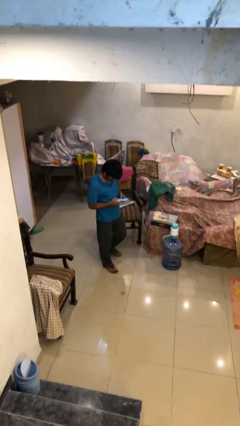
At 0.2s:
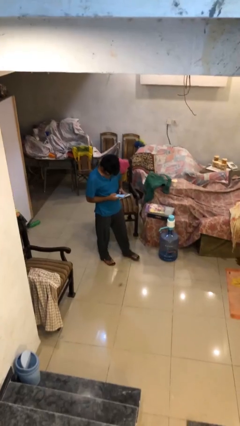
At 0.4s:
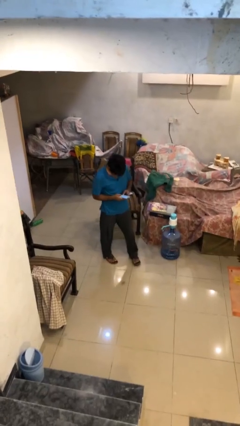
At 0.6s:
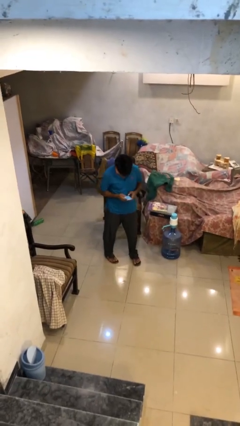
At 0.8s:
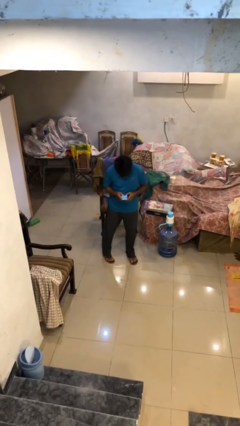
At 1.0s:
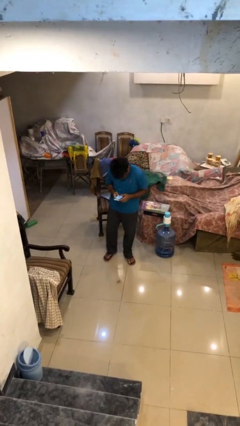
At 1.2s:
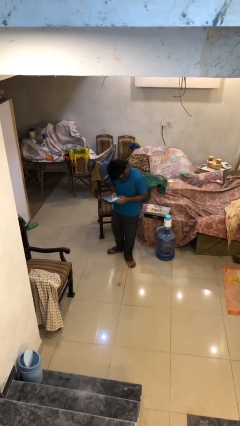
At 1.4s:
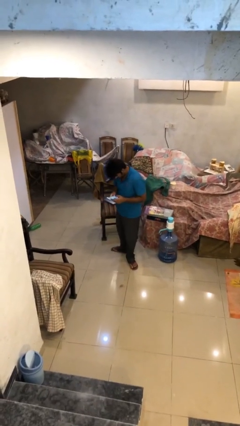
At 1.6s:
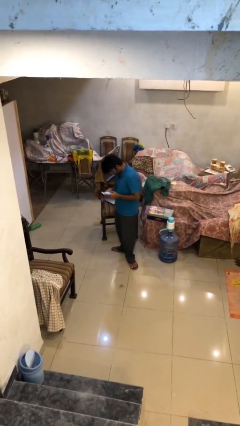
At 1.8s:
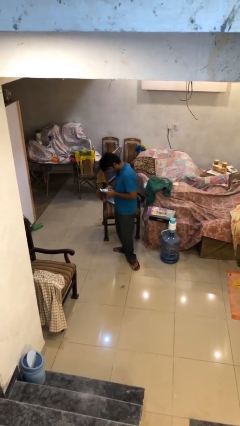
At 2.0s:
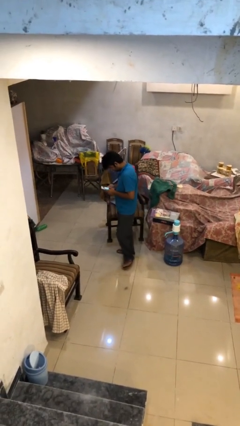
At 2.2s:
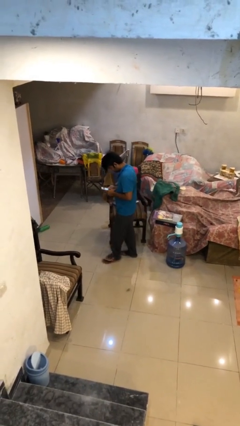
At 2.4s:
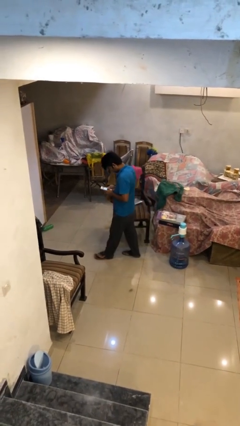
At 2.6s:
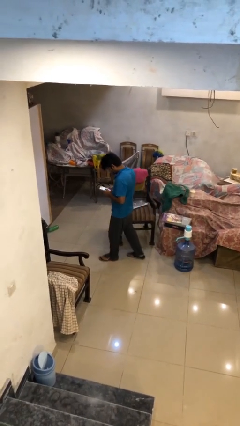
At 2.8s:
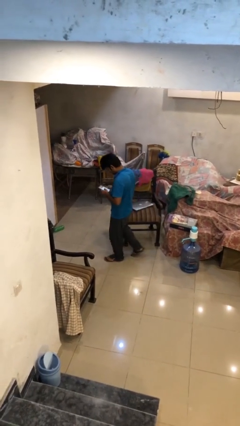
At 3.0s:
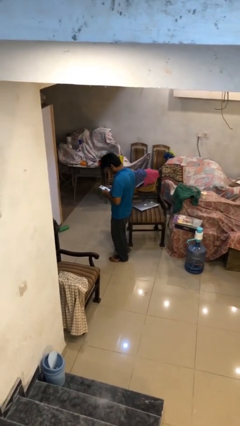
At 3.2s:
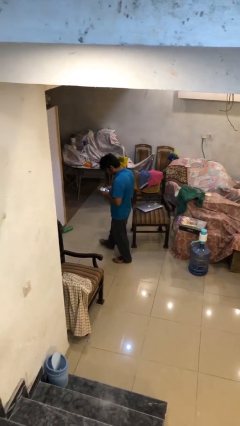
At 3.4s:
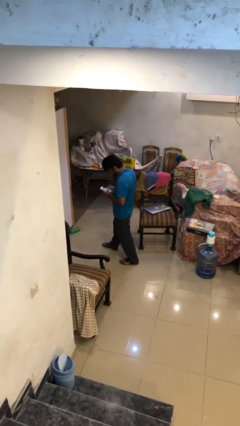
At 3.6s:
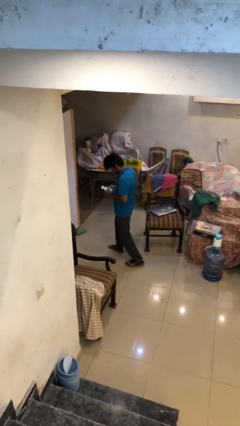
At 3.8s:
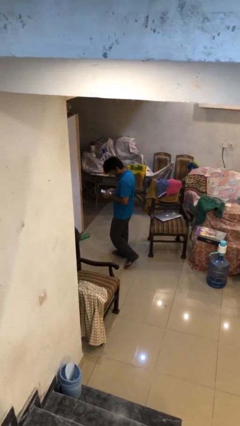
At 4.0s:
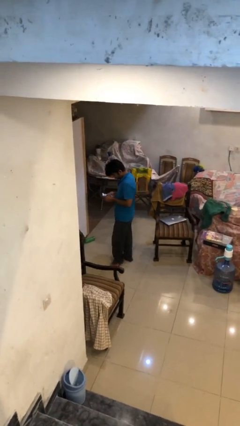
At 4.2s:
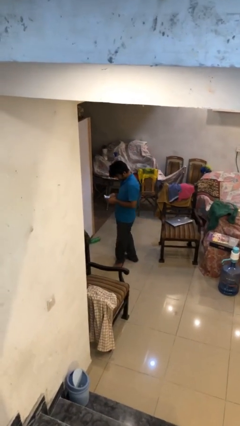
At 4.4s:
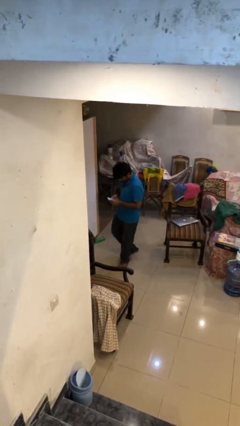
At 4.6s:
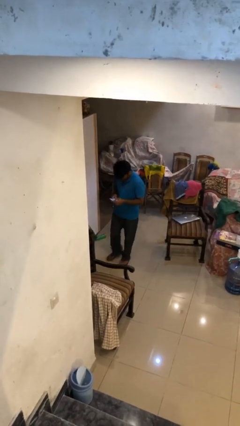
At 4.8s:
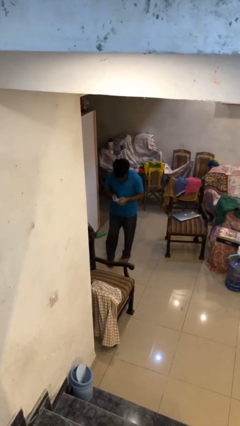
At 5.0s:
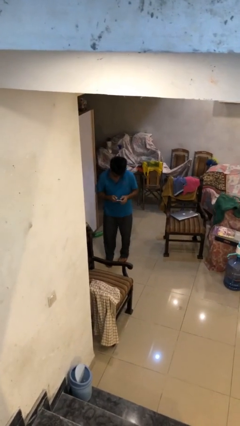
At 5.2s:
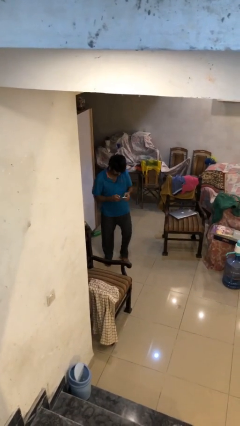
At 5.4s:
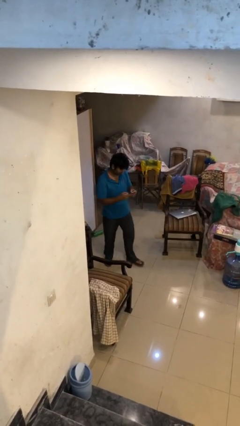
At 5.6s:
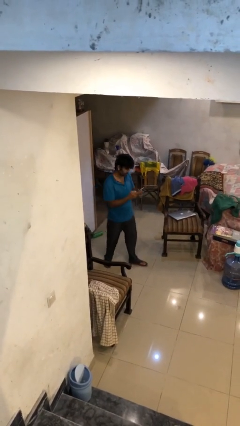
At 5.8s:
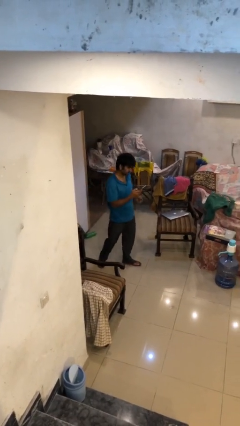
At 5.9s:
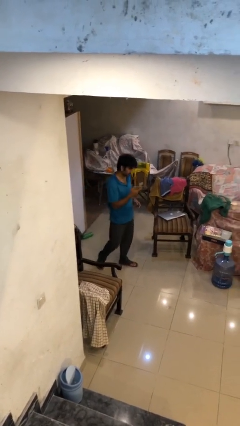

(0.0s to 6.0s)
person texts on phone

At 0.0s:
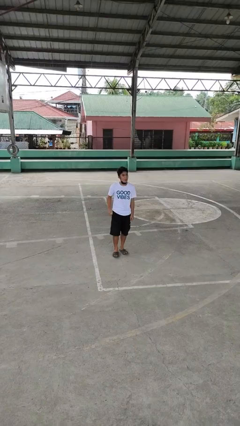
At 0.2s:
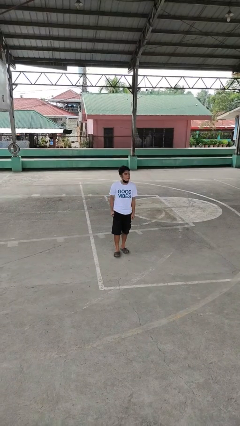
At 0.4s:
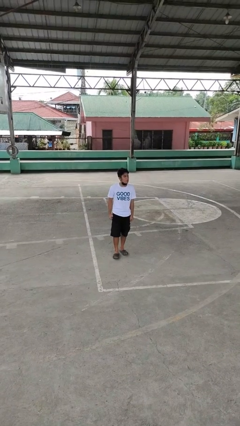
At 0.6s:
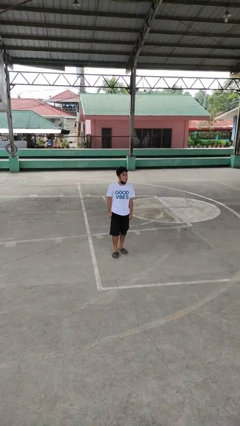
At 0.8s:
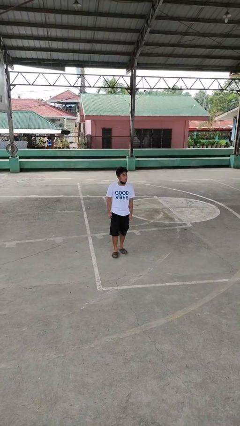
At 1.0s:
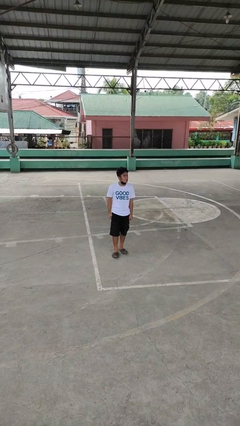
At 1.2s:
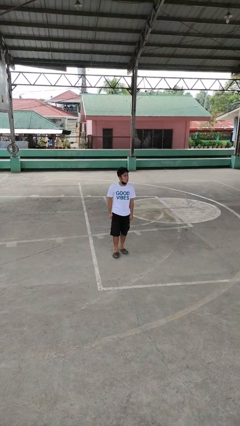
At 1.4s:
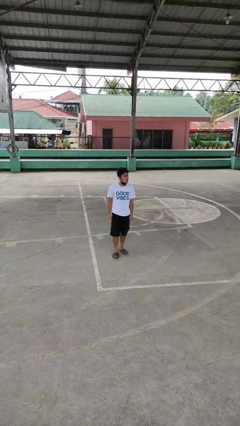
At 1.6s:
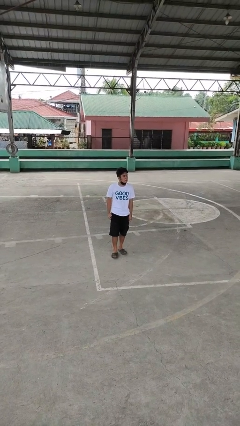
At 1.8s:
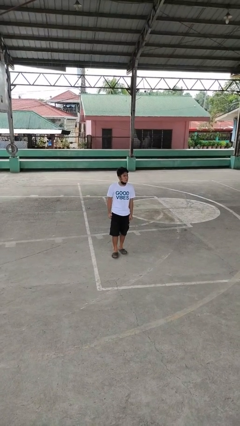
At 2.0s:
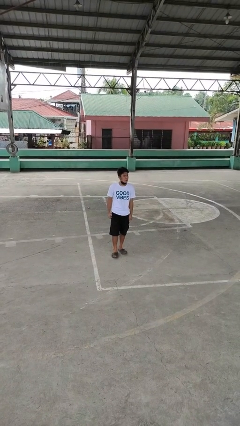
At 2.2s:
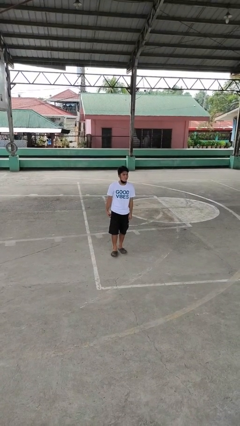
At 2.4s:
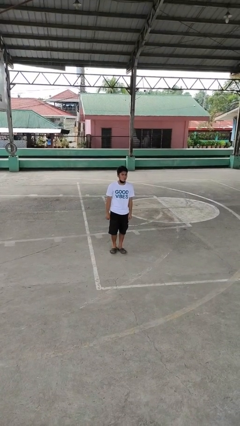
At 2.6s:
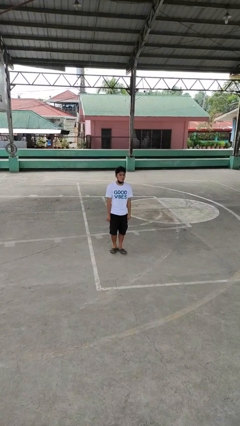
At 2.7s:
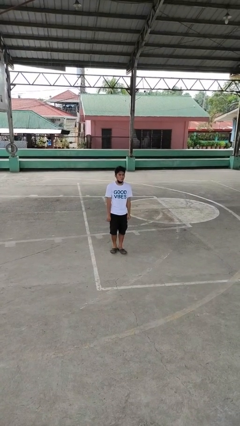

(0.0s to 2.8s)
person sticks out tongue

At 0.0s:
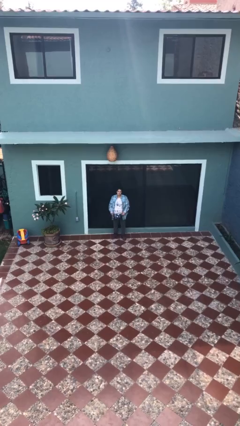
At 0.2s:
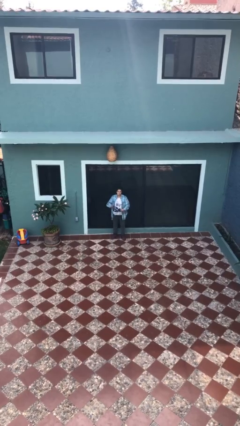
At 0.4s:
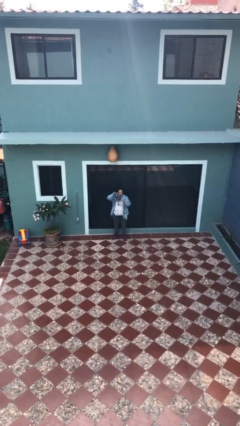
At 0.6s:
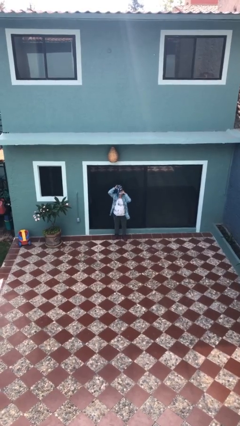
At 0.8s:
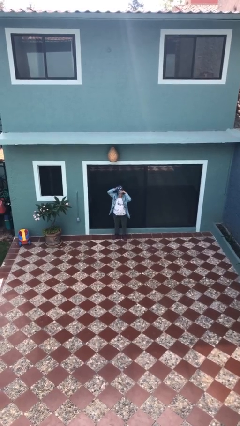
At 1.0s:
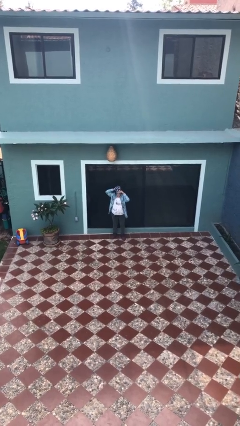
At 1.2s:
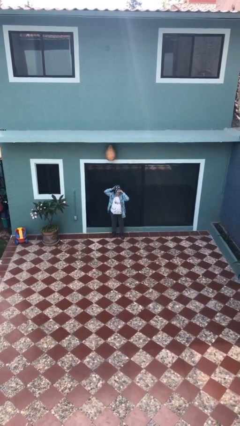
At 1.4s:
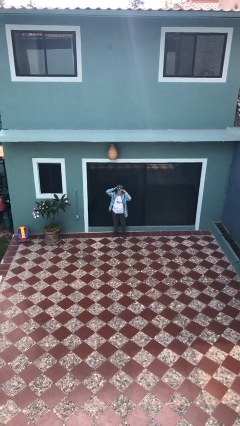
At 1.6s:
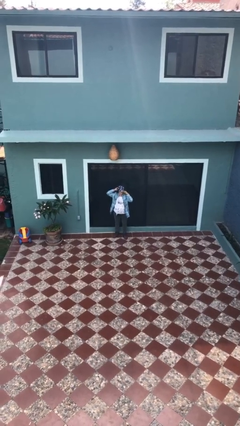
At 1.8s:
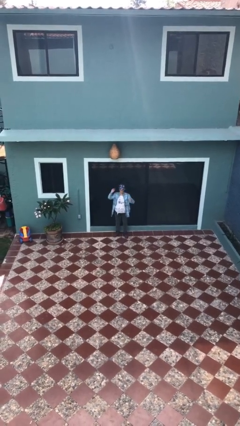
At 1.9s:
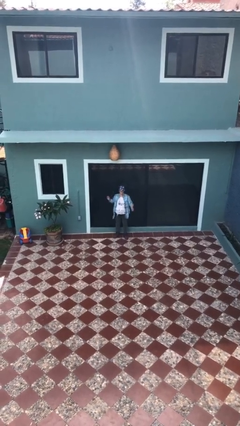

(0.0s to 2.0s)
person puts on hat

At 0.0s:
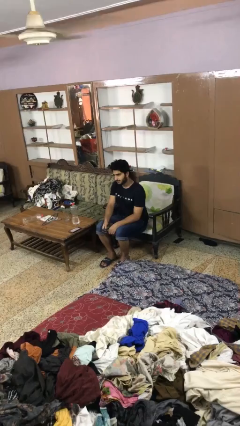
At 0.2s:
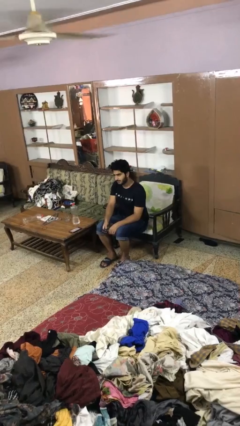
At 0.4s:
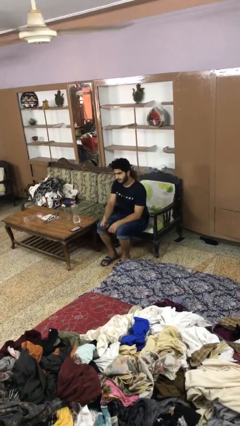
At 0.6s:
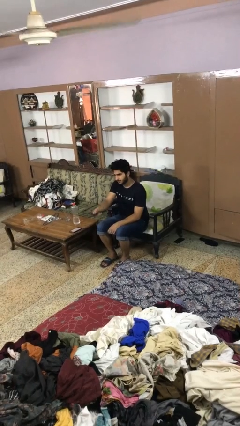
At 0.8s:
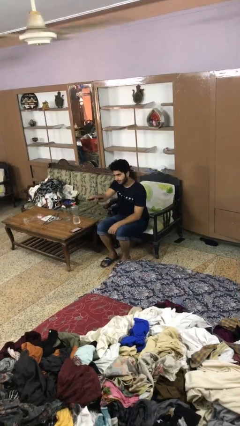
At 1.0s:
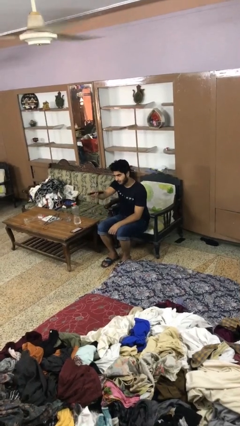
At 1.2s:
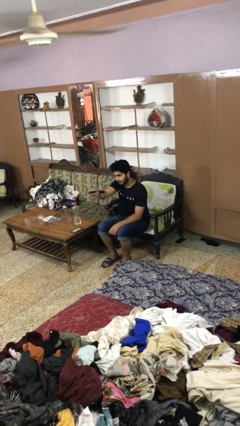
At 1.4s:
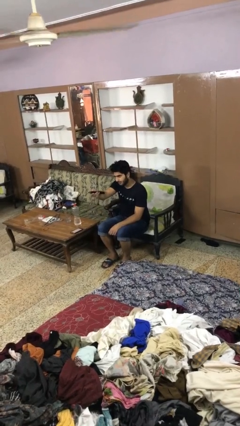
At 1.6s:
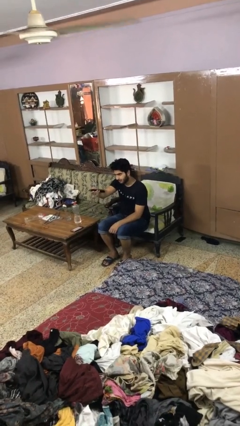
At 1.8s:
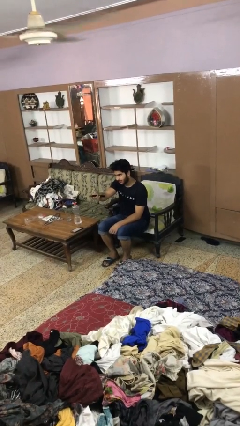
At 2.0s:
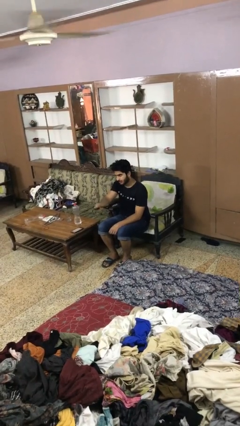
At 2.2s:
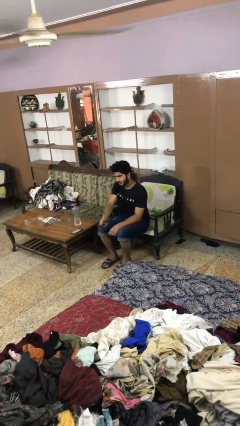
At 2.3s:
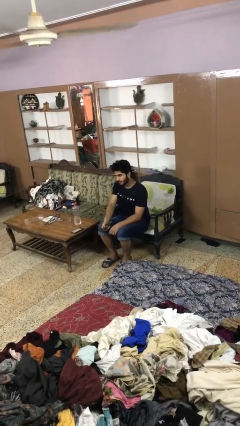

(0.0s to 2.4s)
person uses television remote

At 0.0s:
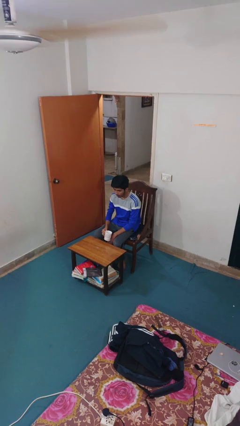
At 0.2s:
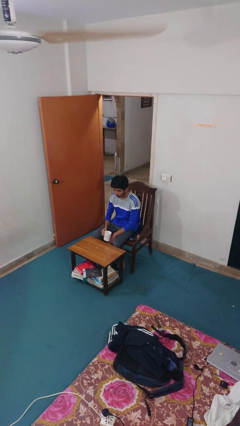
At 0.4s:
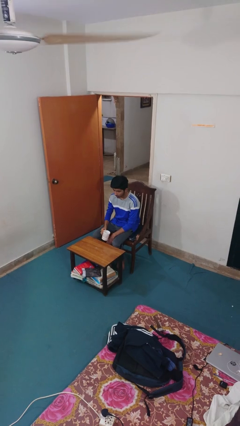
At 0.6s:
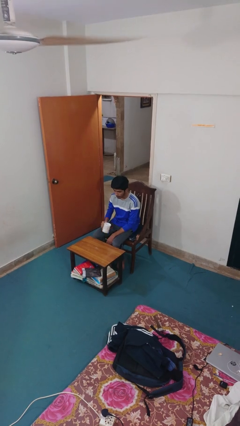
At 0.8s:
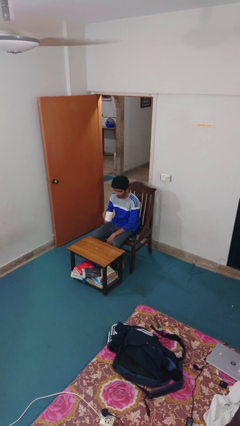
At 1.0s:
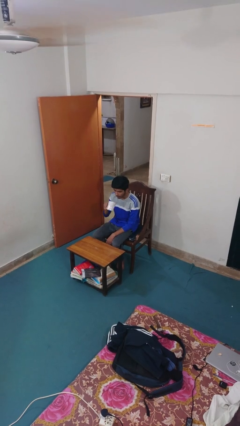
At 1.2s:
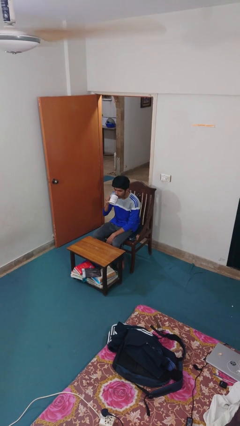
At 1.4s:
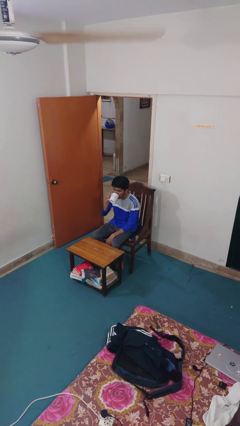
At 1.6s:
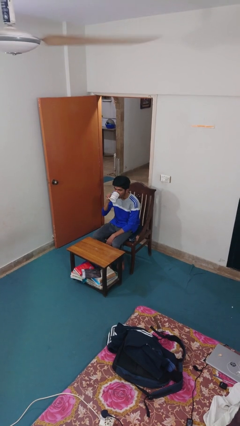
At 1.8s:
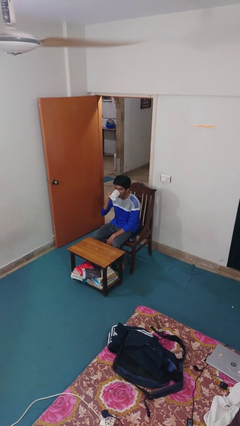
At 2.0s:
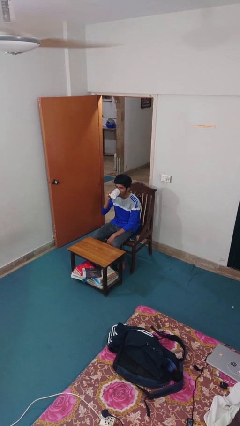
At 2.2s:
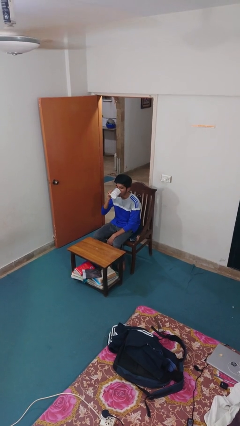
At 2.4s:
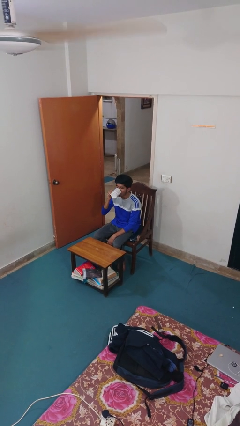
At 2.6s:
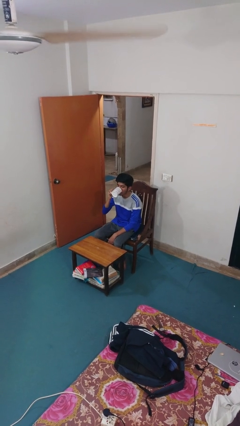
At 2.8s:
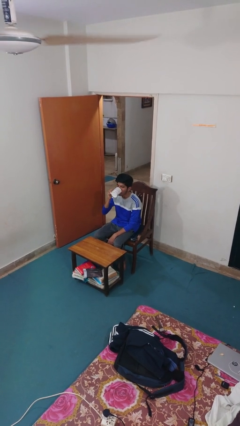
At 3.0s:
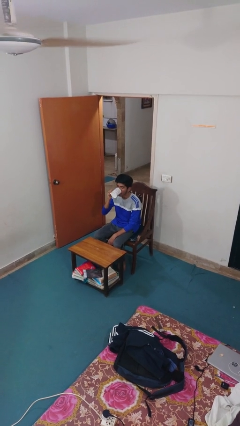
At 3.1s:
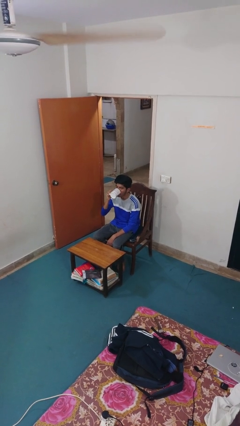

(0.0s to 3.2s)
person drinks from mug

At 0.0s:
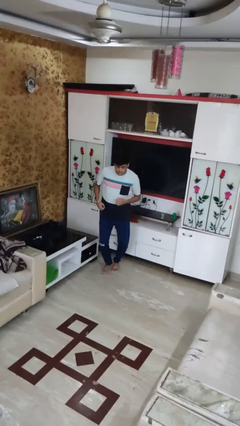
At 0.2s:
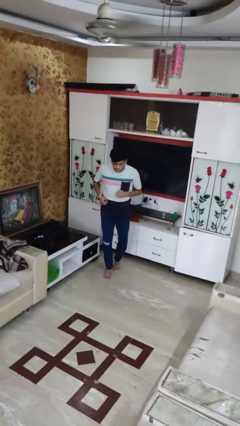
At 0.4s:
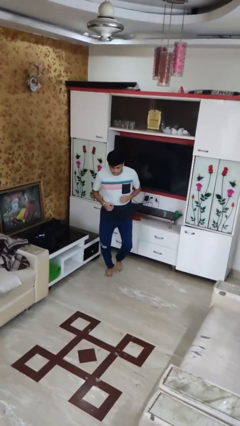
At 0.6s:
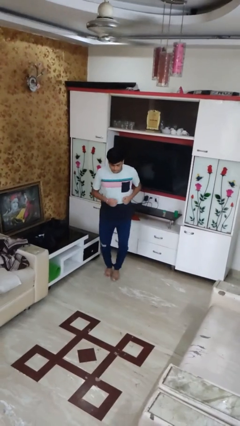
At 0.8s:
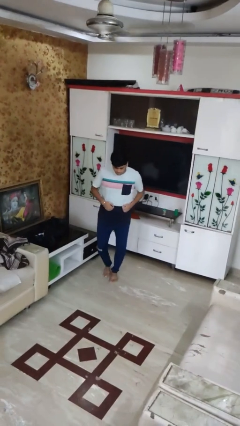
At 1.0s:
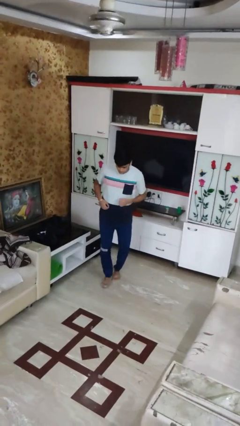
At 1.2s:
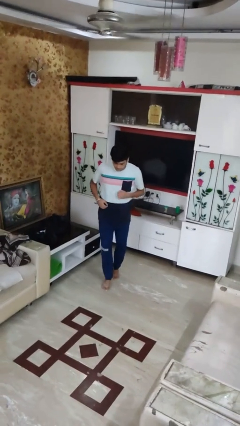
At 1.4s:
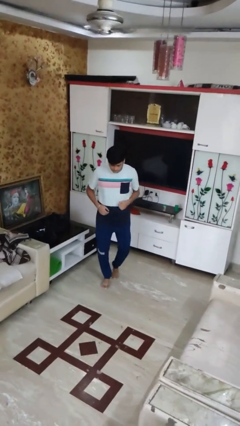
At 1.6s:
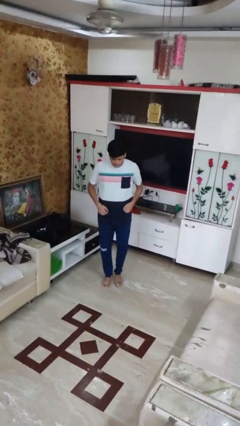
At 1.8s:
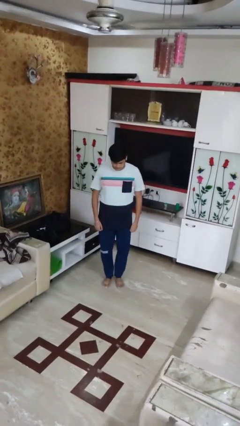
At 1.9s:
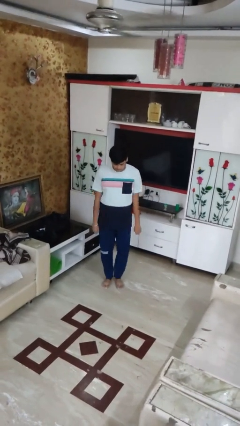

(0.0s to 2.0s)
person walks tiptoe
